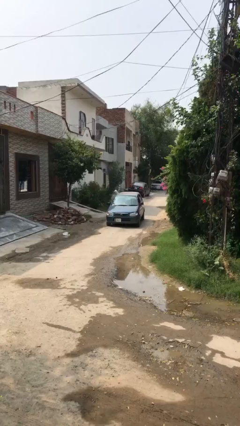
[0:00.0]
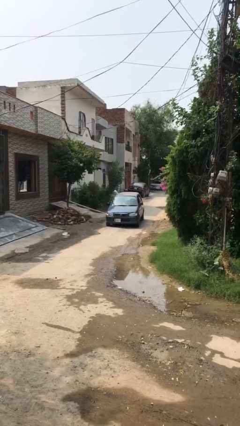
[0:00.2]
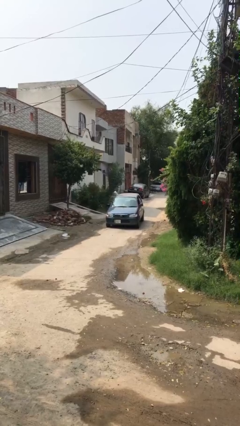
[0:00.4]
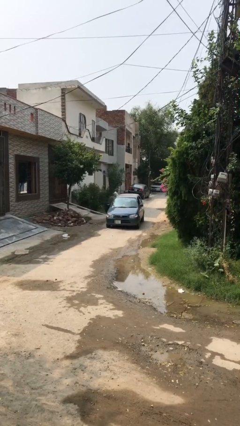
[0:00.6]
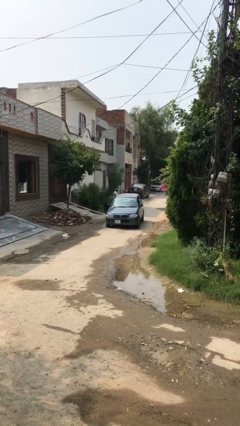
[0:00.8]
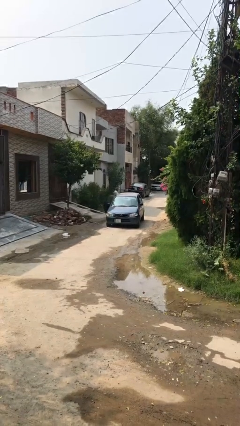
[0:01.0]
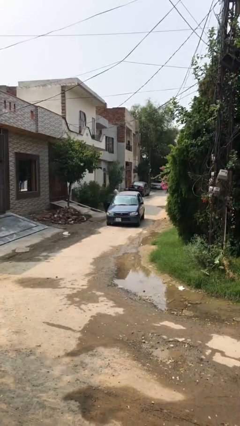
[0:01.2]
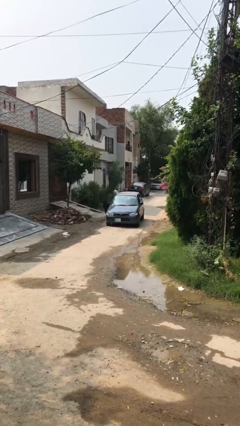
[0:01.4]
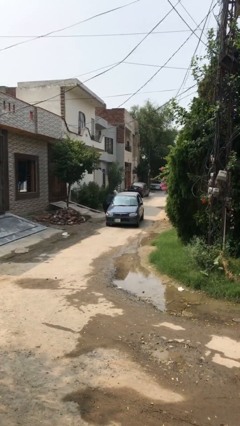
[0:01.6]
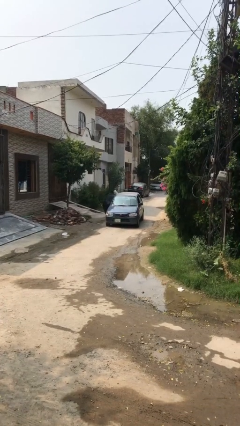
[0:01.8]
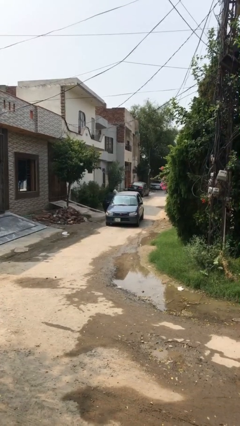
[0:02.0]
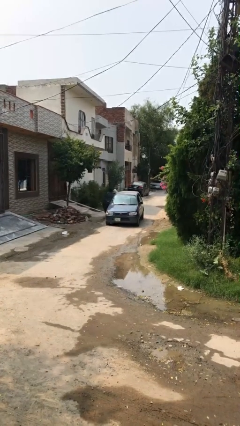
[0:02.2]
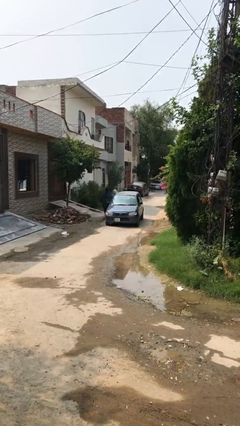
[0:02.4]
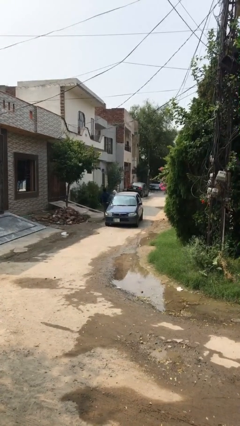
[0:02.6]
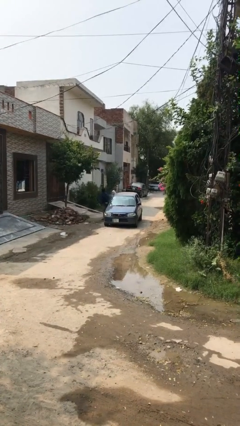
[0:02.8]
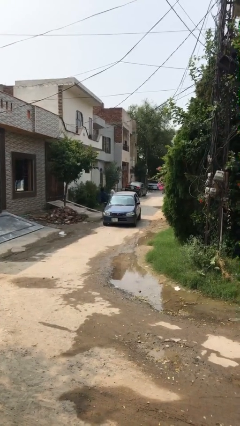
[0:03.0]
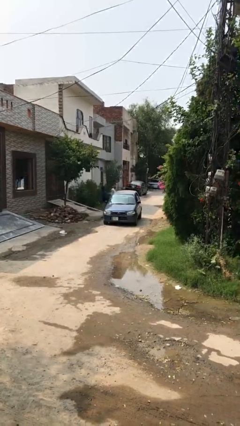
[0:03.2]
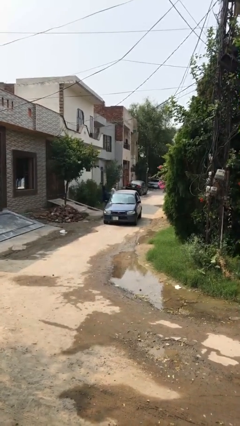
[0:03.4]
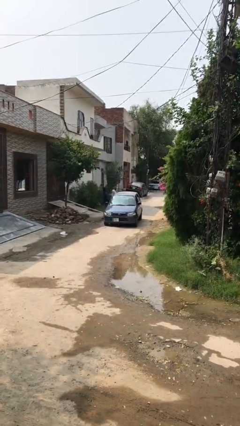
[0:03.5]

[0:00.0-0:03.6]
car drops off person

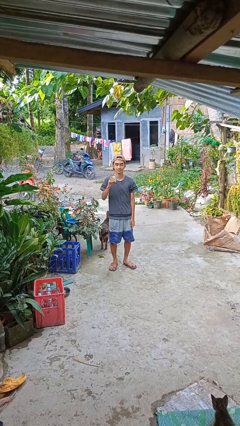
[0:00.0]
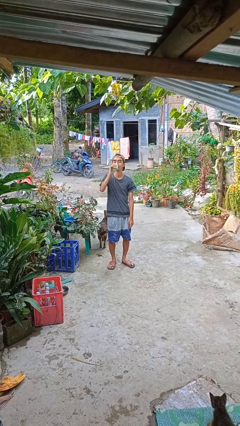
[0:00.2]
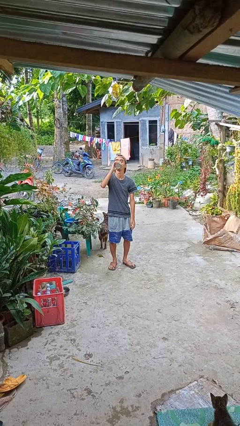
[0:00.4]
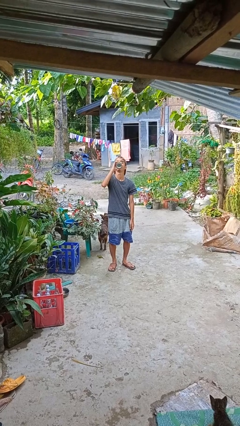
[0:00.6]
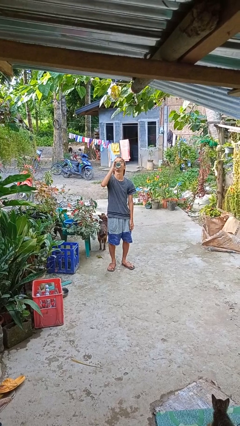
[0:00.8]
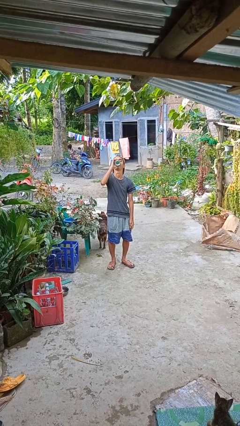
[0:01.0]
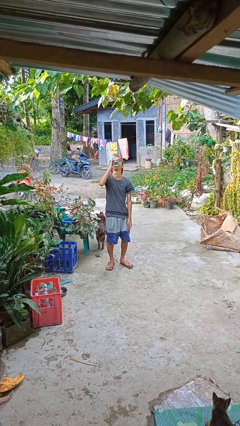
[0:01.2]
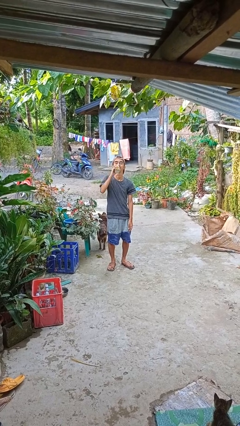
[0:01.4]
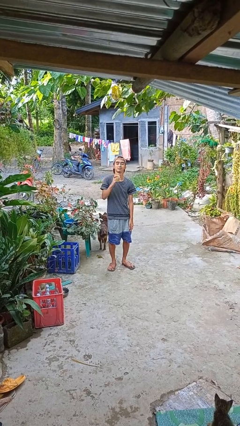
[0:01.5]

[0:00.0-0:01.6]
person drinks from beverage can

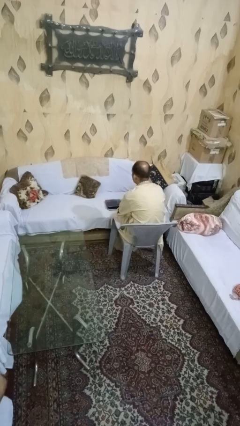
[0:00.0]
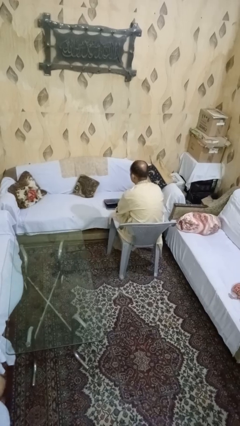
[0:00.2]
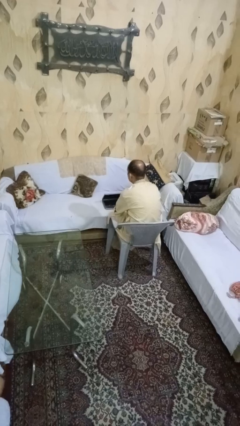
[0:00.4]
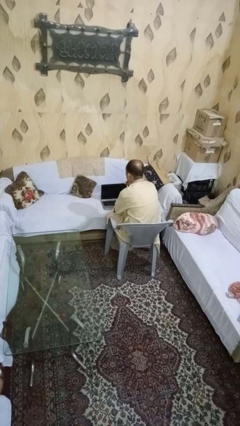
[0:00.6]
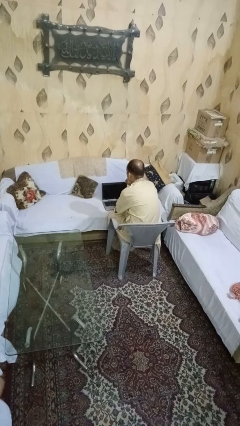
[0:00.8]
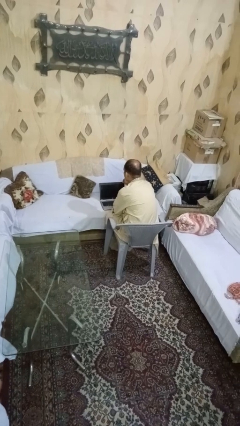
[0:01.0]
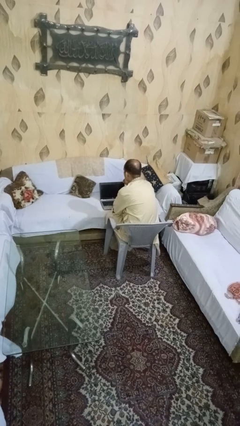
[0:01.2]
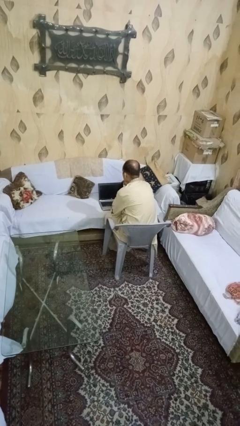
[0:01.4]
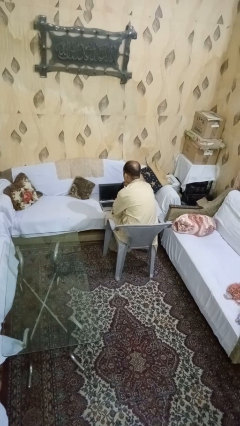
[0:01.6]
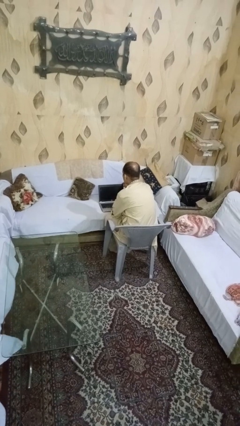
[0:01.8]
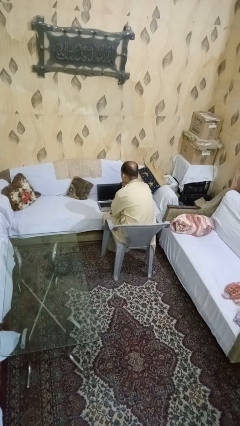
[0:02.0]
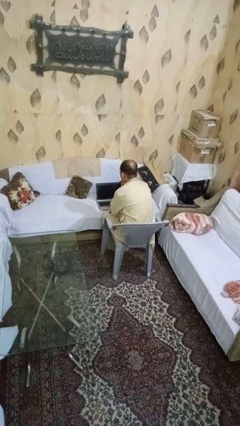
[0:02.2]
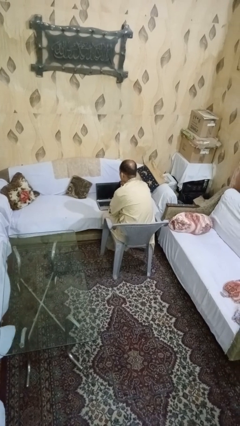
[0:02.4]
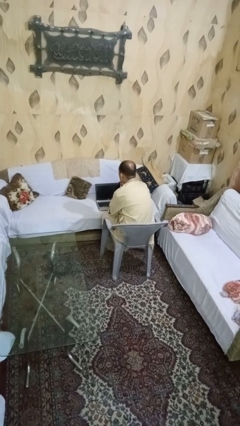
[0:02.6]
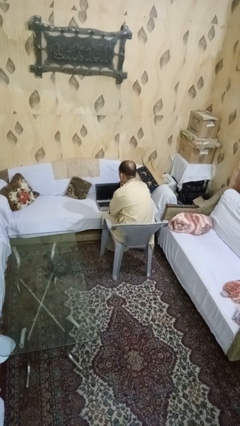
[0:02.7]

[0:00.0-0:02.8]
person opens laptop

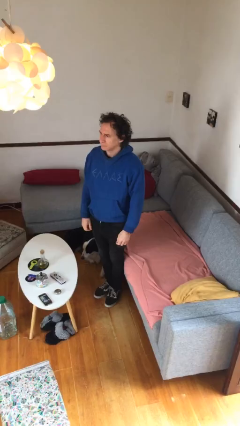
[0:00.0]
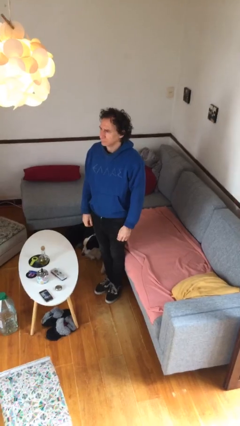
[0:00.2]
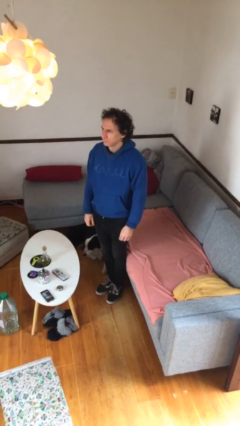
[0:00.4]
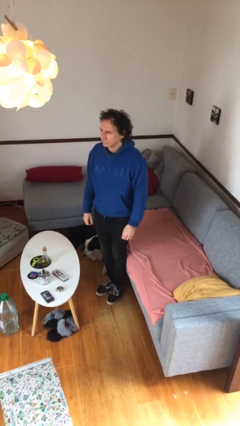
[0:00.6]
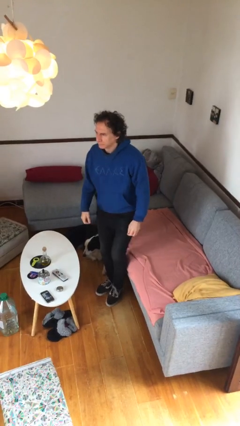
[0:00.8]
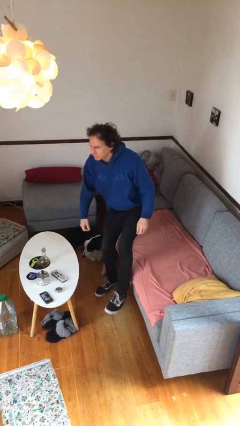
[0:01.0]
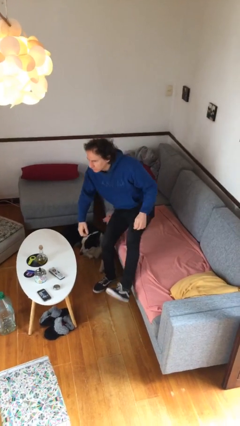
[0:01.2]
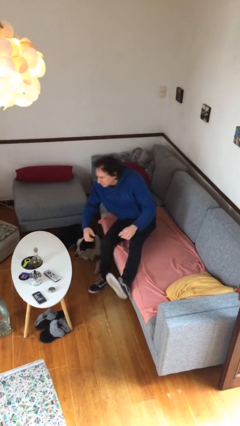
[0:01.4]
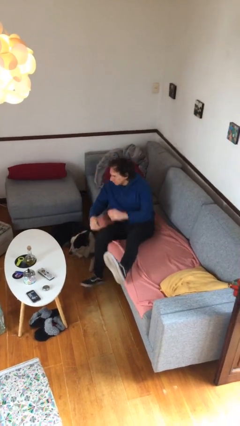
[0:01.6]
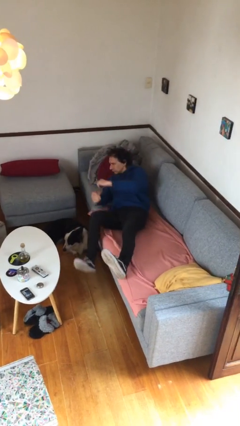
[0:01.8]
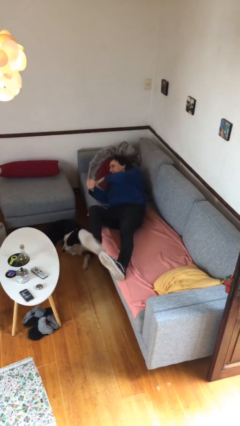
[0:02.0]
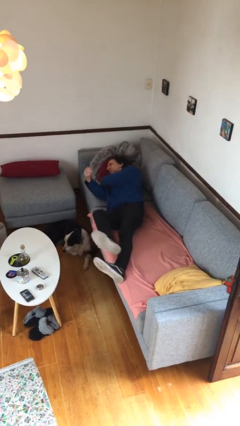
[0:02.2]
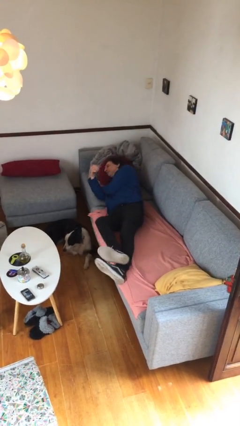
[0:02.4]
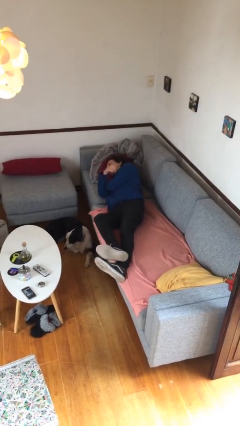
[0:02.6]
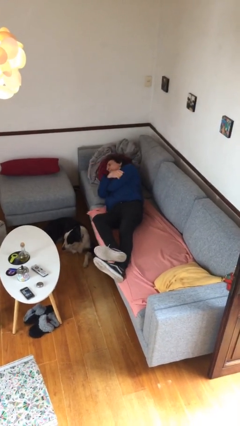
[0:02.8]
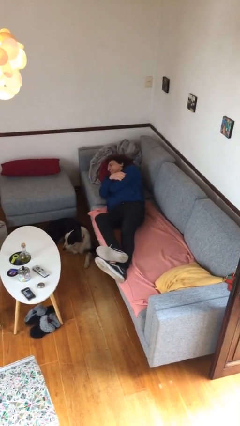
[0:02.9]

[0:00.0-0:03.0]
person lies down on couch

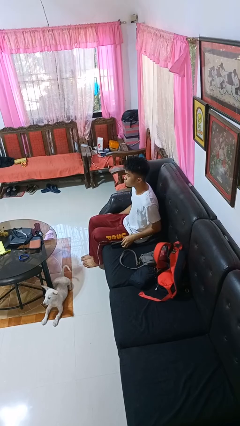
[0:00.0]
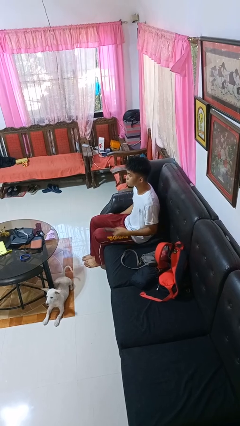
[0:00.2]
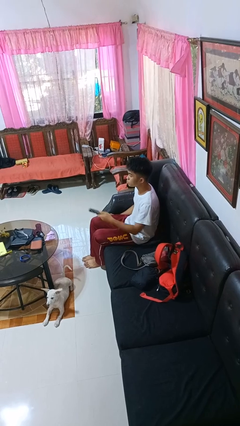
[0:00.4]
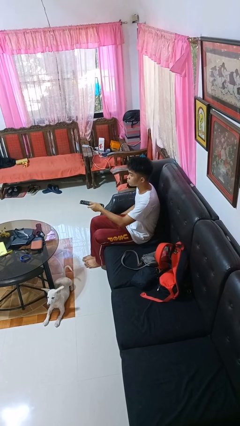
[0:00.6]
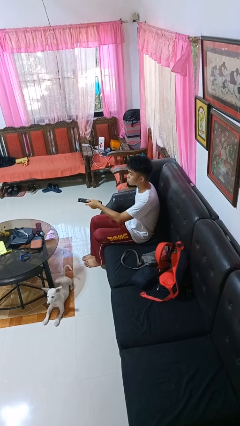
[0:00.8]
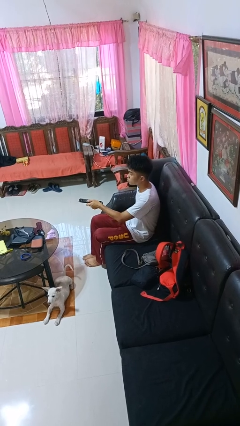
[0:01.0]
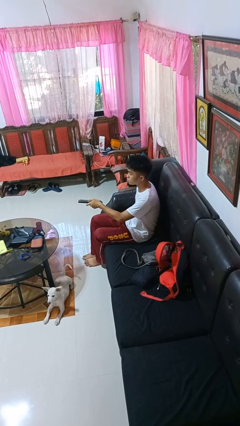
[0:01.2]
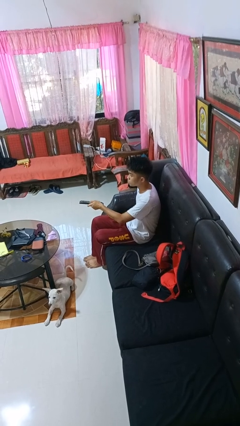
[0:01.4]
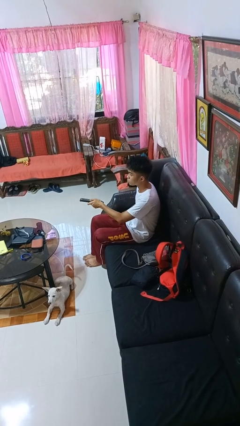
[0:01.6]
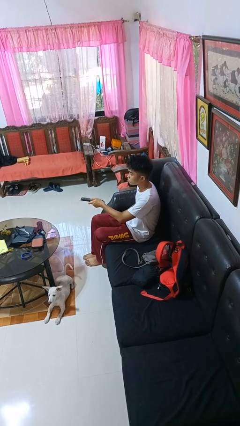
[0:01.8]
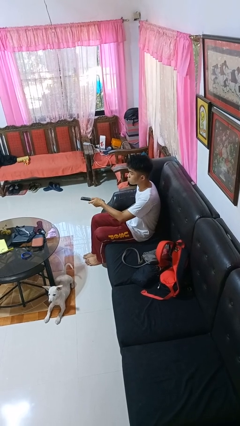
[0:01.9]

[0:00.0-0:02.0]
person puts down object on shelf

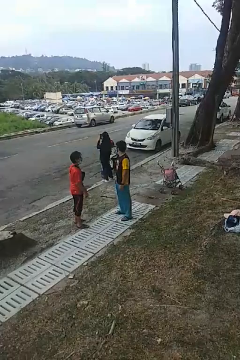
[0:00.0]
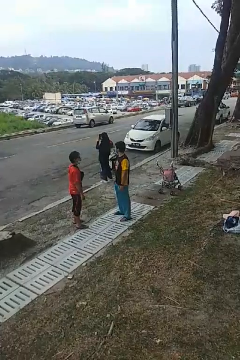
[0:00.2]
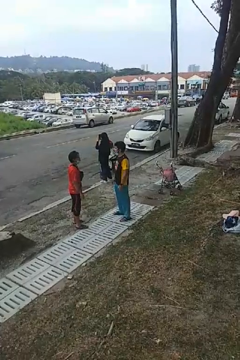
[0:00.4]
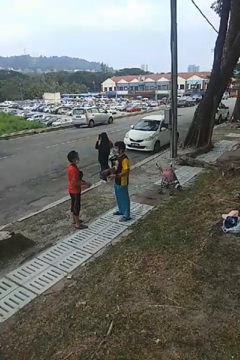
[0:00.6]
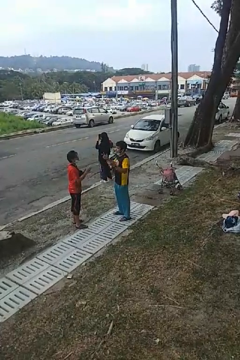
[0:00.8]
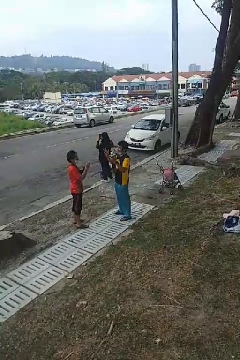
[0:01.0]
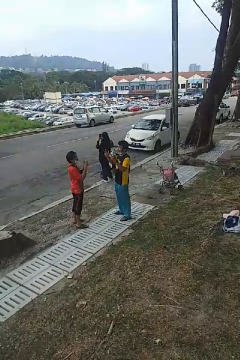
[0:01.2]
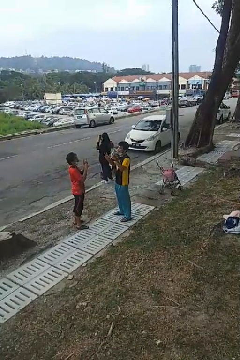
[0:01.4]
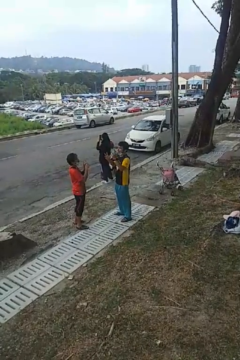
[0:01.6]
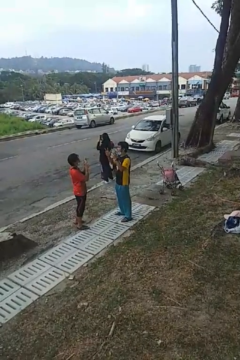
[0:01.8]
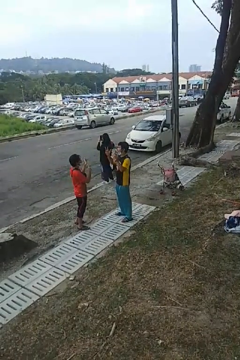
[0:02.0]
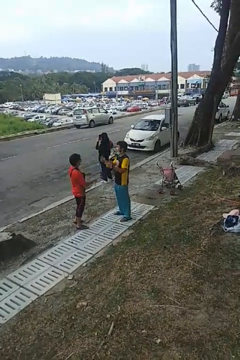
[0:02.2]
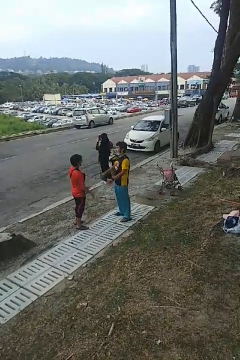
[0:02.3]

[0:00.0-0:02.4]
person talks to person

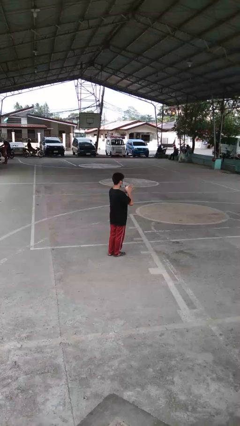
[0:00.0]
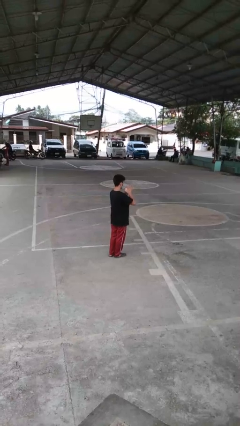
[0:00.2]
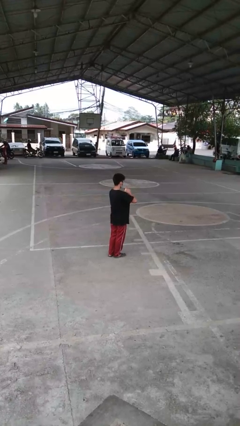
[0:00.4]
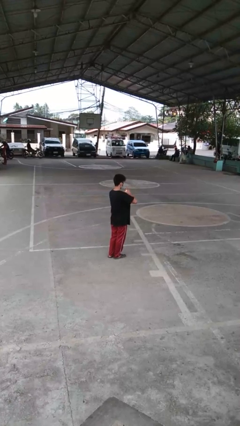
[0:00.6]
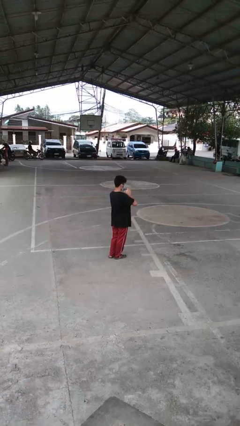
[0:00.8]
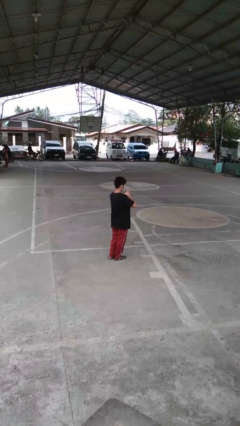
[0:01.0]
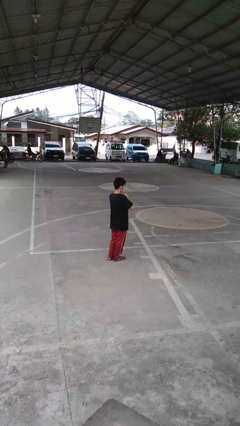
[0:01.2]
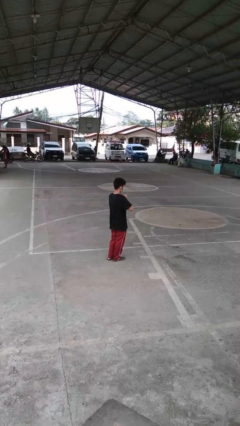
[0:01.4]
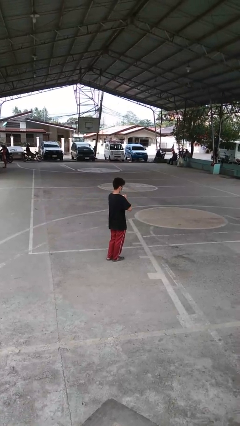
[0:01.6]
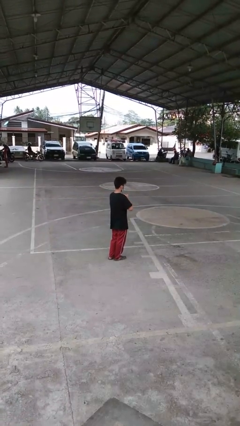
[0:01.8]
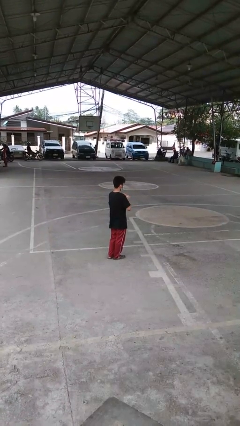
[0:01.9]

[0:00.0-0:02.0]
person squeezes object

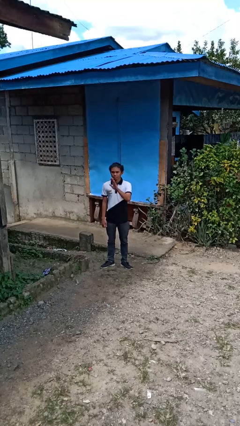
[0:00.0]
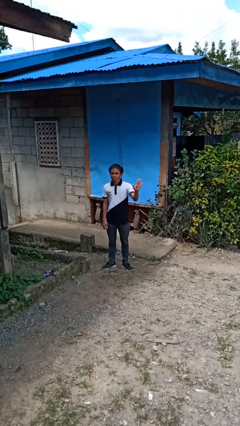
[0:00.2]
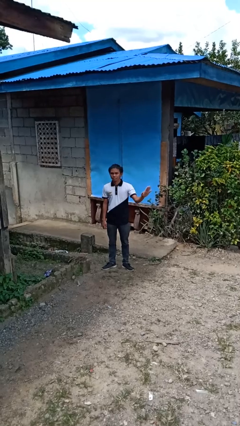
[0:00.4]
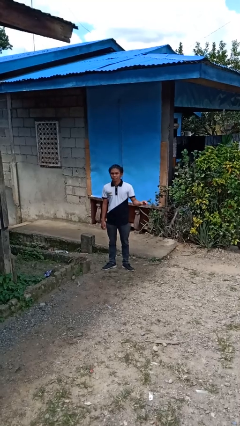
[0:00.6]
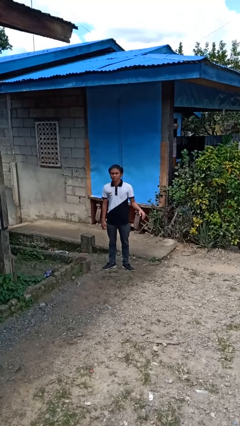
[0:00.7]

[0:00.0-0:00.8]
person gestures swipe left
